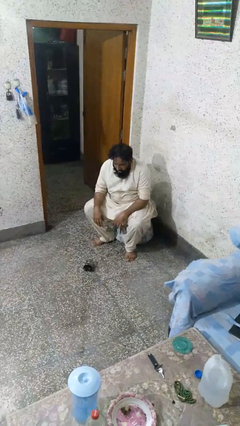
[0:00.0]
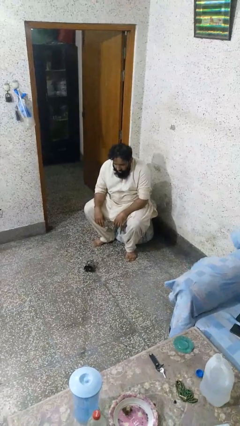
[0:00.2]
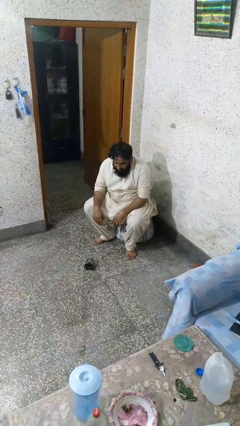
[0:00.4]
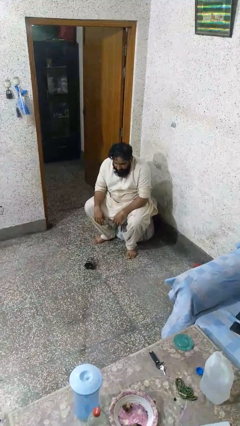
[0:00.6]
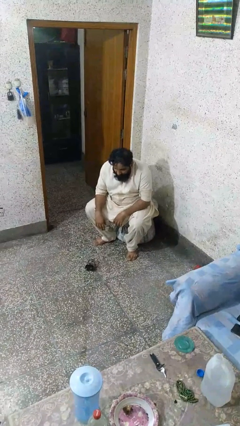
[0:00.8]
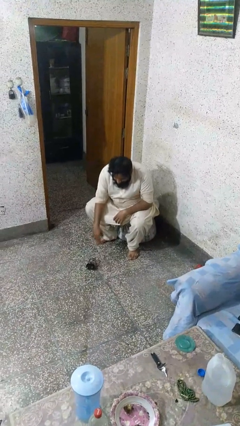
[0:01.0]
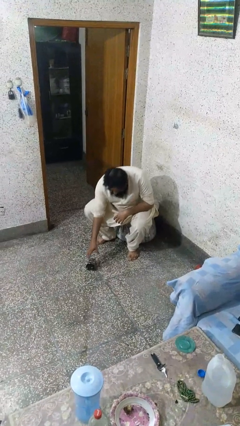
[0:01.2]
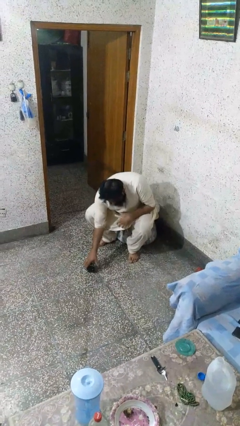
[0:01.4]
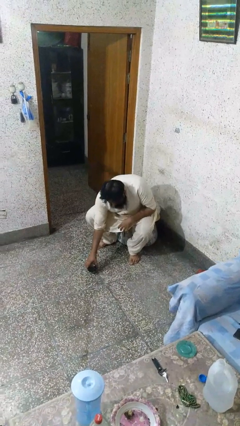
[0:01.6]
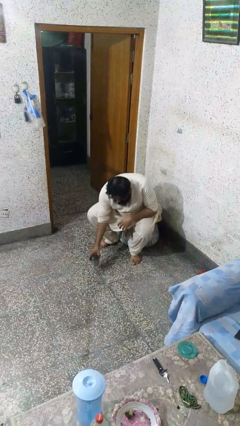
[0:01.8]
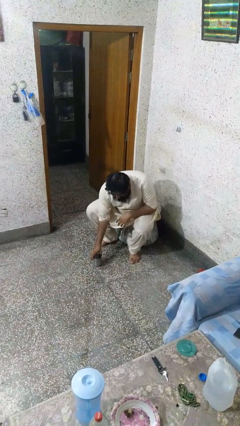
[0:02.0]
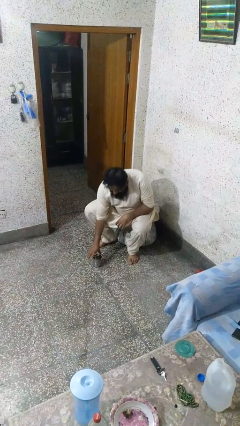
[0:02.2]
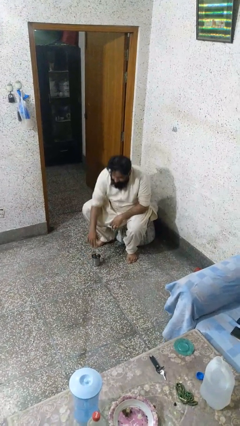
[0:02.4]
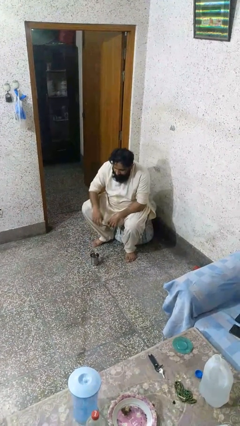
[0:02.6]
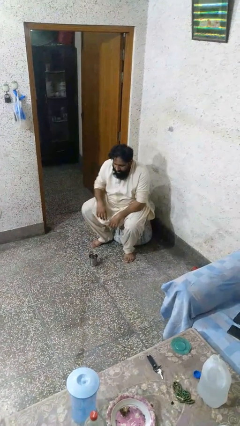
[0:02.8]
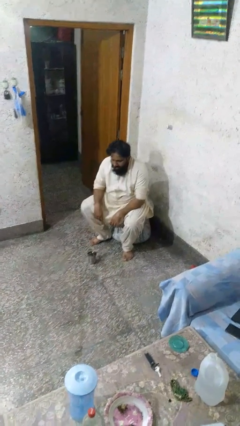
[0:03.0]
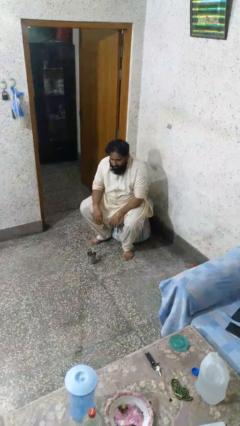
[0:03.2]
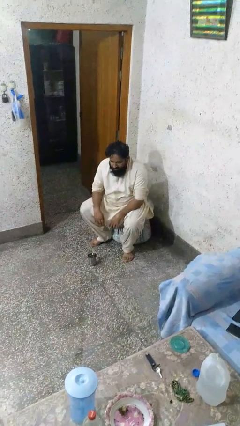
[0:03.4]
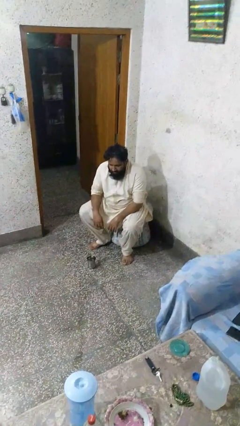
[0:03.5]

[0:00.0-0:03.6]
person sets upright glass

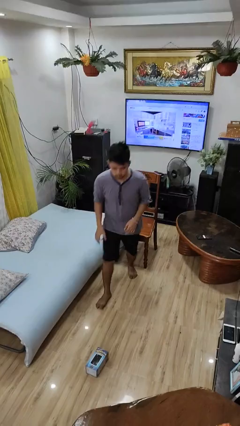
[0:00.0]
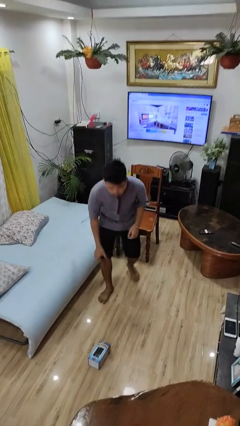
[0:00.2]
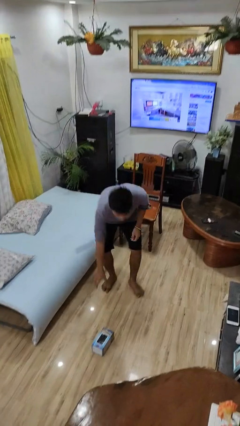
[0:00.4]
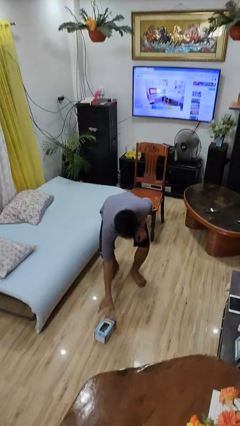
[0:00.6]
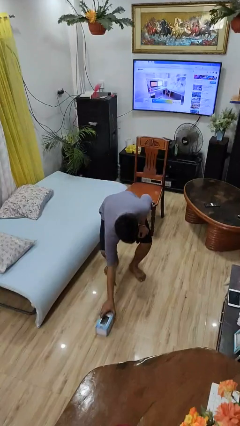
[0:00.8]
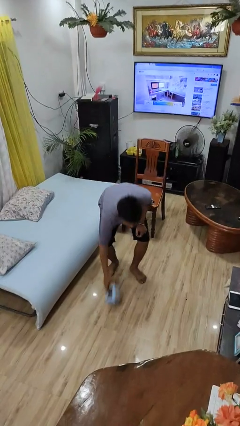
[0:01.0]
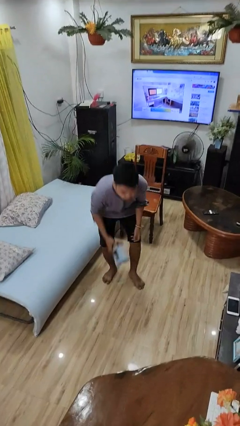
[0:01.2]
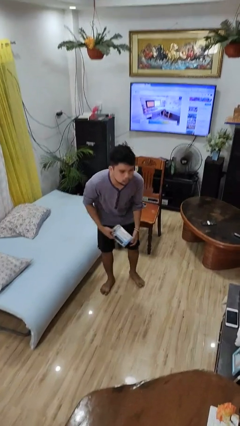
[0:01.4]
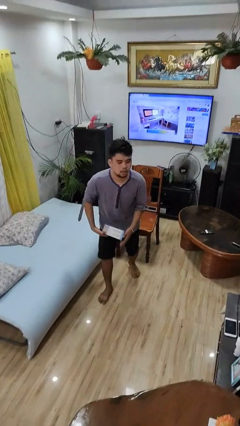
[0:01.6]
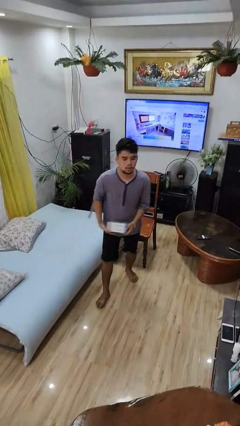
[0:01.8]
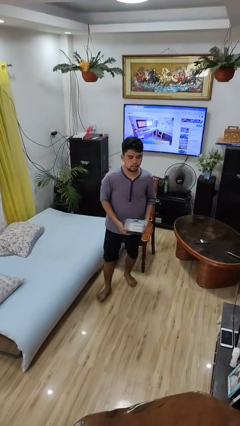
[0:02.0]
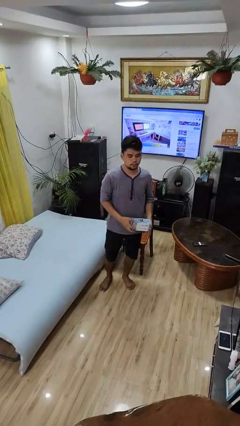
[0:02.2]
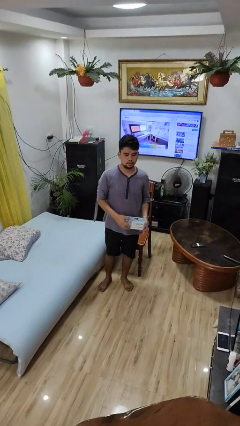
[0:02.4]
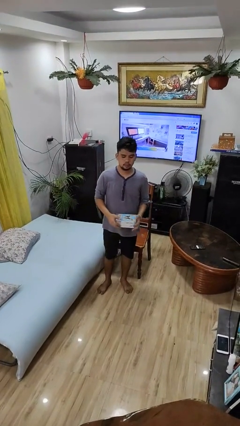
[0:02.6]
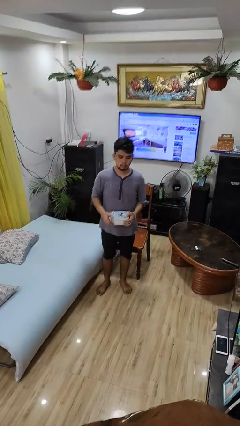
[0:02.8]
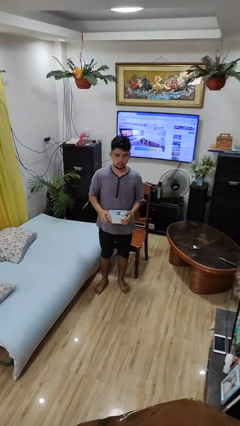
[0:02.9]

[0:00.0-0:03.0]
person picks up object from floor

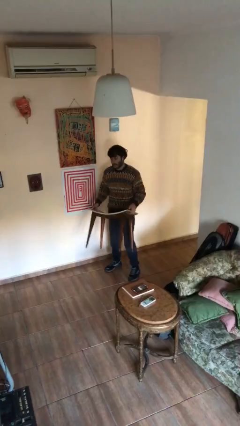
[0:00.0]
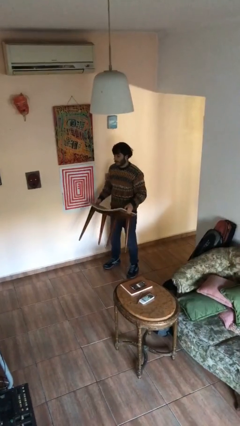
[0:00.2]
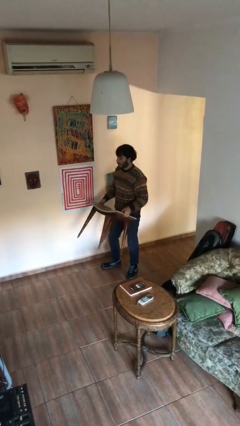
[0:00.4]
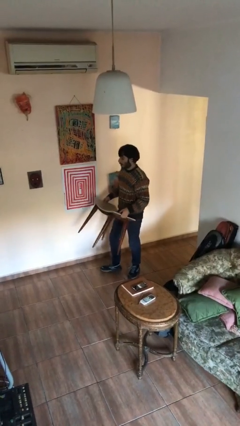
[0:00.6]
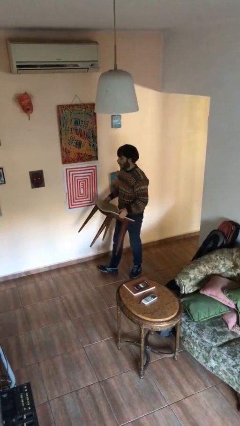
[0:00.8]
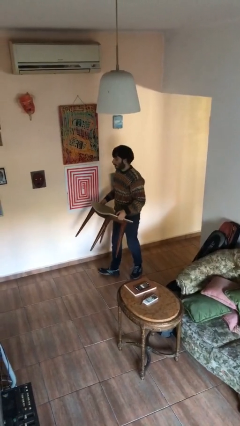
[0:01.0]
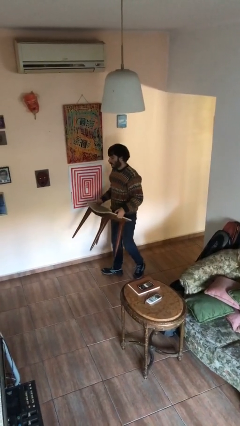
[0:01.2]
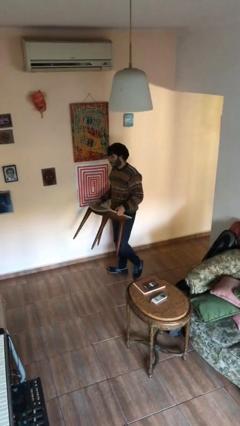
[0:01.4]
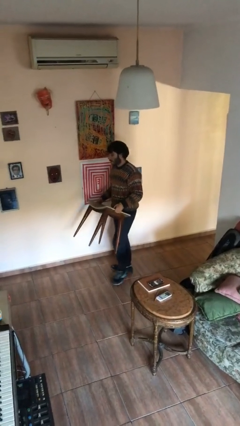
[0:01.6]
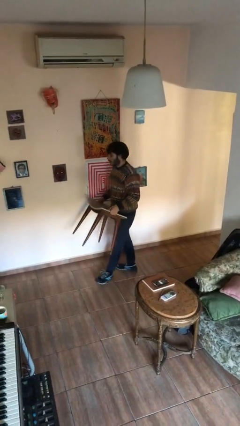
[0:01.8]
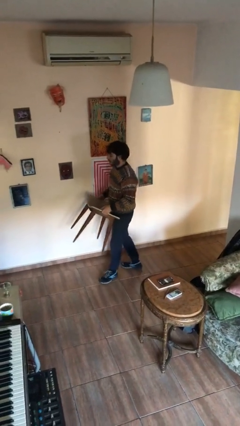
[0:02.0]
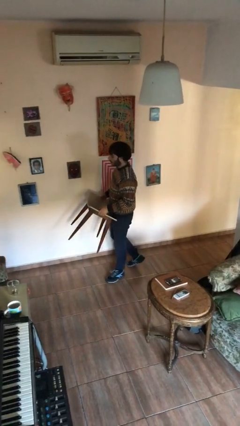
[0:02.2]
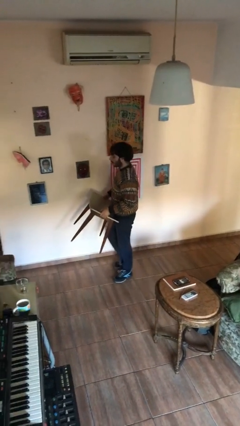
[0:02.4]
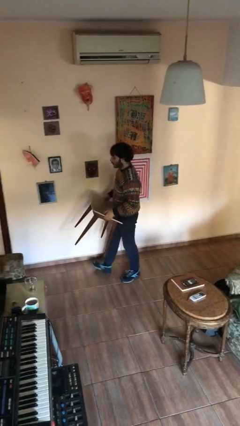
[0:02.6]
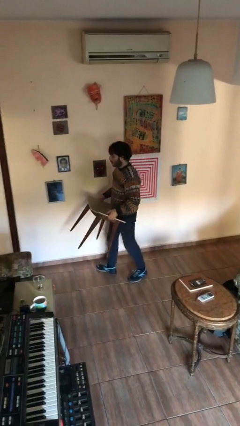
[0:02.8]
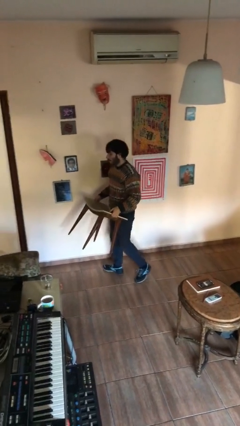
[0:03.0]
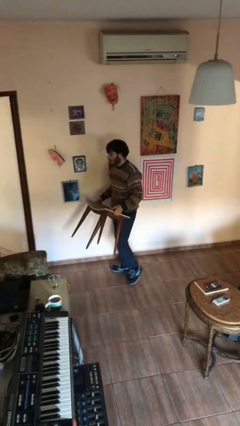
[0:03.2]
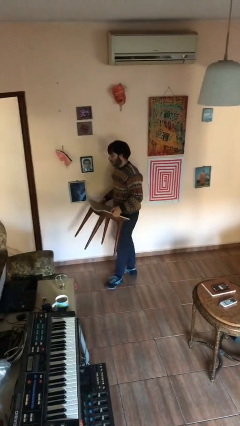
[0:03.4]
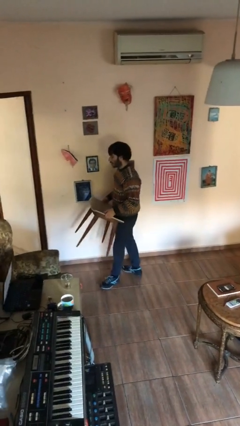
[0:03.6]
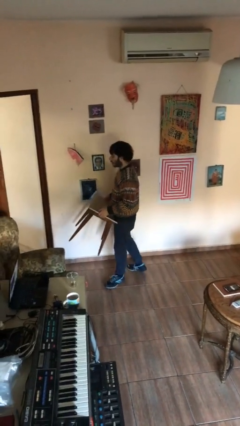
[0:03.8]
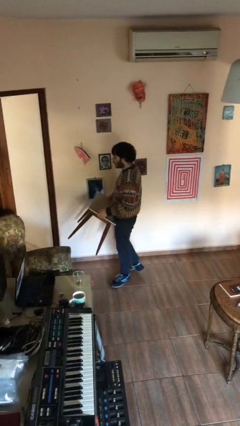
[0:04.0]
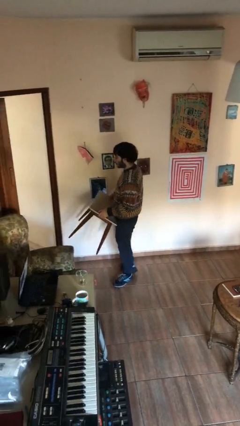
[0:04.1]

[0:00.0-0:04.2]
person carries furniture

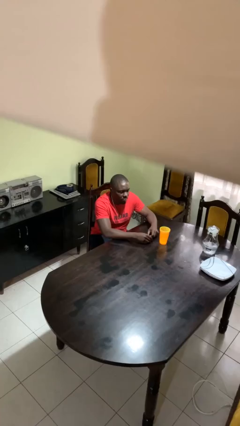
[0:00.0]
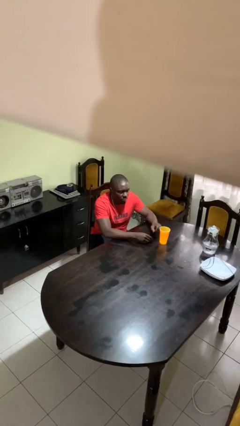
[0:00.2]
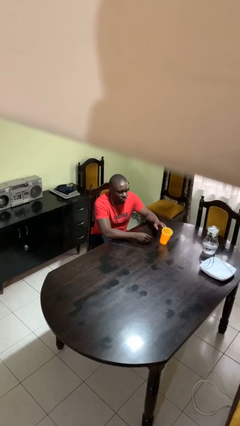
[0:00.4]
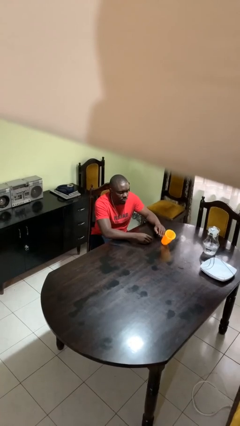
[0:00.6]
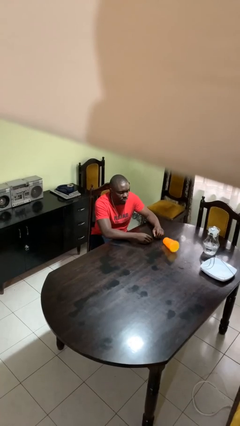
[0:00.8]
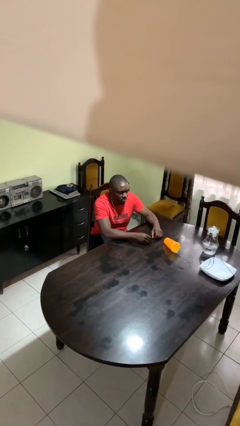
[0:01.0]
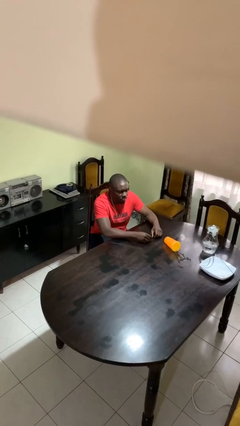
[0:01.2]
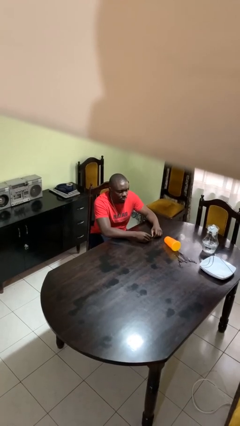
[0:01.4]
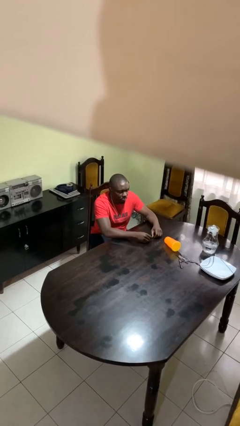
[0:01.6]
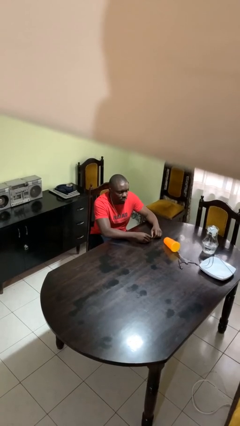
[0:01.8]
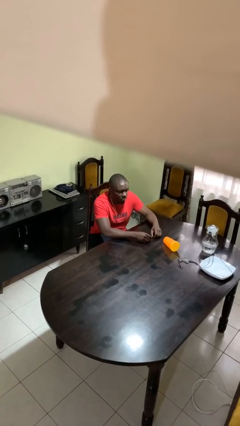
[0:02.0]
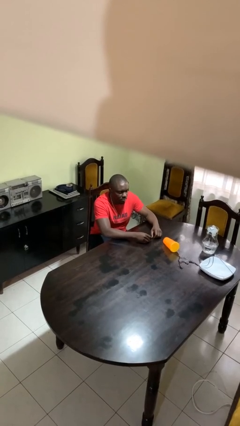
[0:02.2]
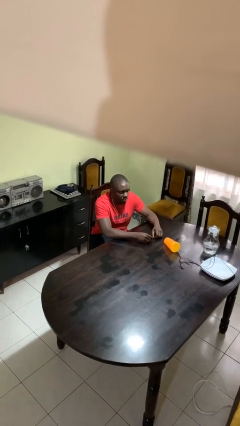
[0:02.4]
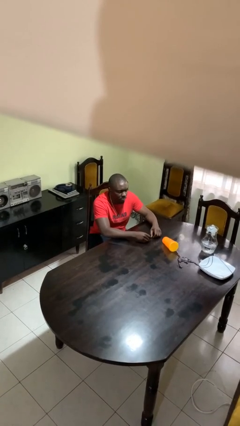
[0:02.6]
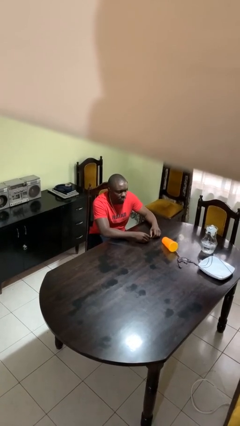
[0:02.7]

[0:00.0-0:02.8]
person spills on table

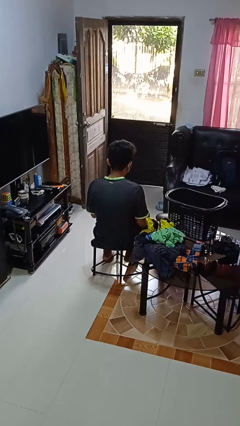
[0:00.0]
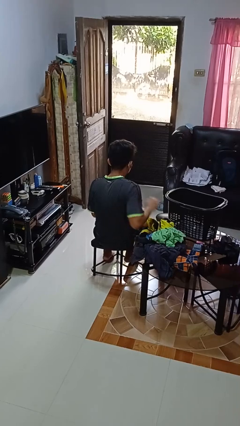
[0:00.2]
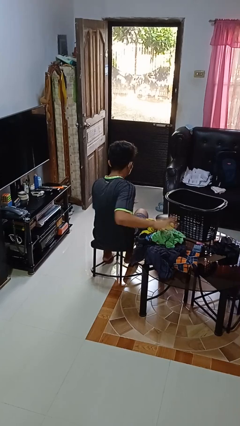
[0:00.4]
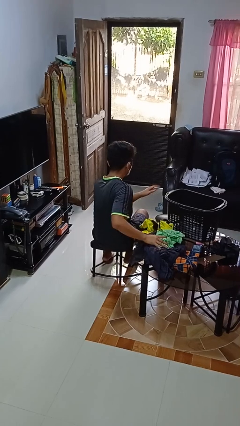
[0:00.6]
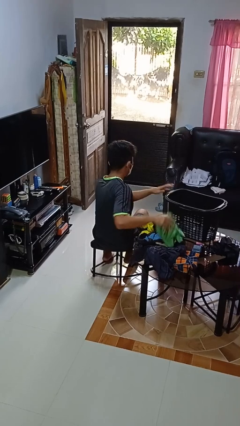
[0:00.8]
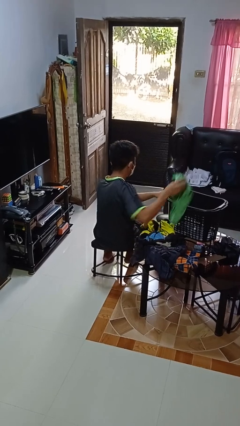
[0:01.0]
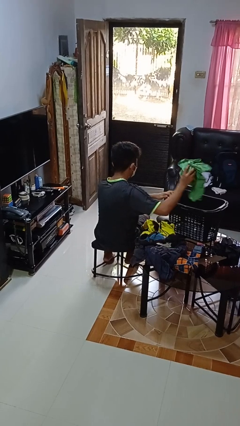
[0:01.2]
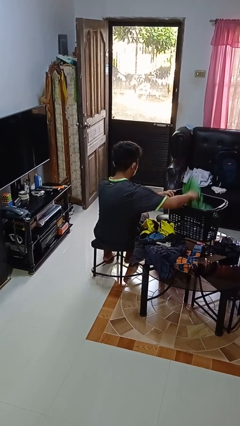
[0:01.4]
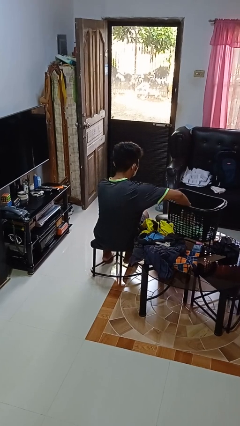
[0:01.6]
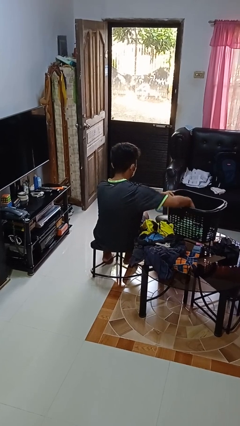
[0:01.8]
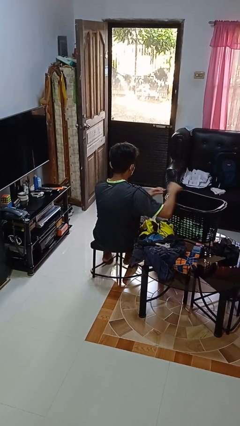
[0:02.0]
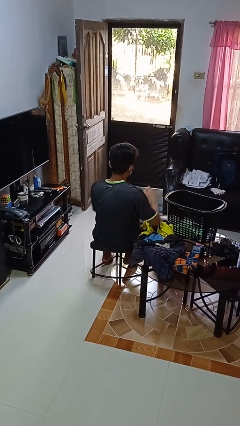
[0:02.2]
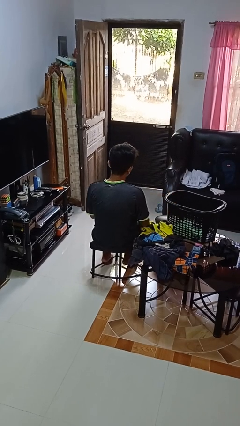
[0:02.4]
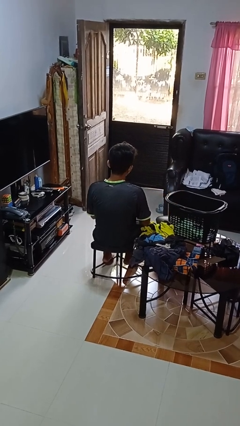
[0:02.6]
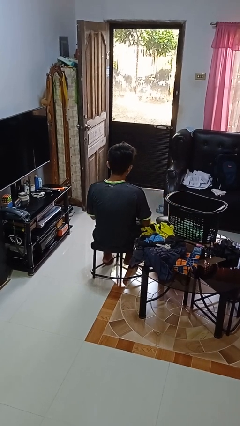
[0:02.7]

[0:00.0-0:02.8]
person puts object into basket

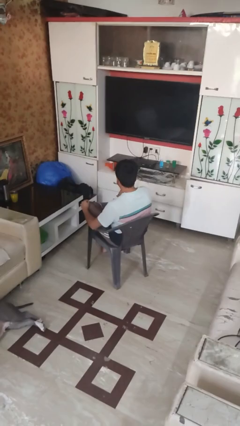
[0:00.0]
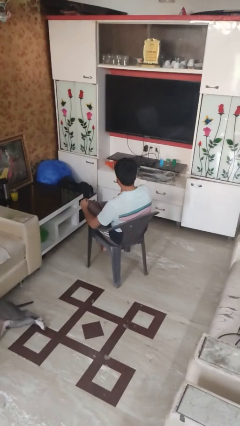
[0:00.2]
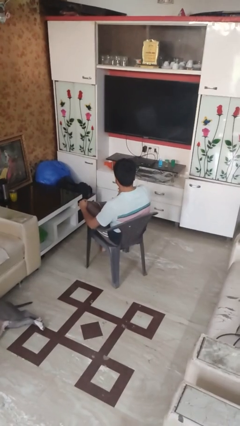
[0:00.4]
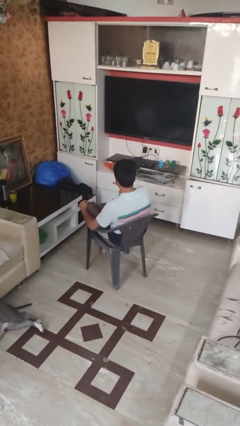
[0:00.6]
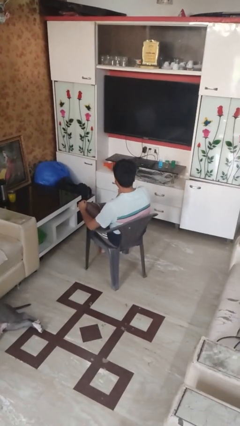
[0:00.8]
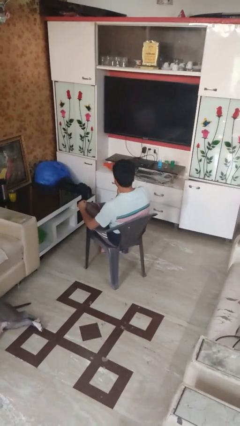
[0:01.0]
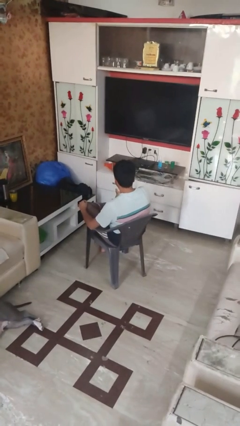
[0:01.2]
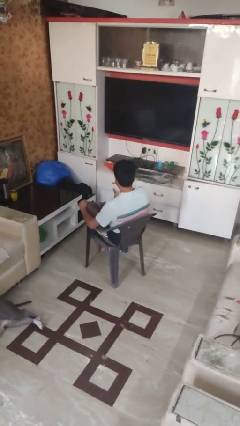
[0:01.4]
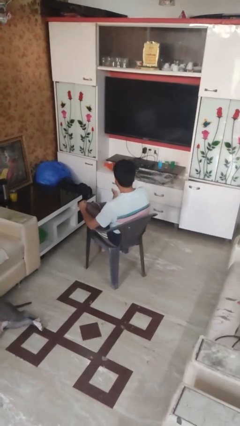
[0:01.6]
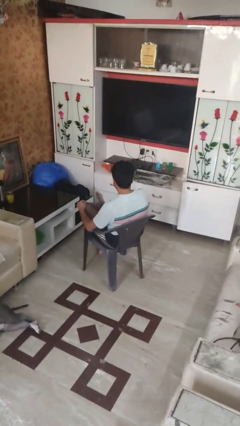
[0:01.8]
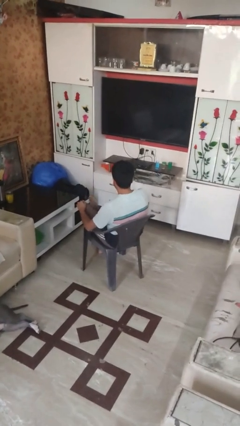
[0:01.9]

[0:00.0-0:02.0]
person rubs foot
